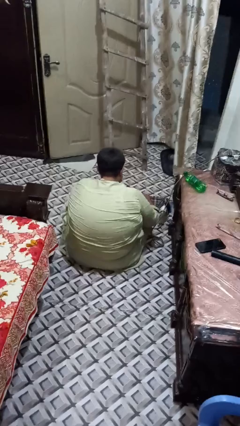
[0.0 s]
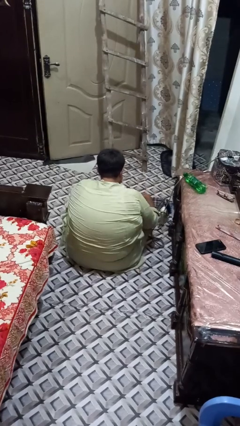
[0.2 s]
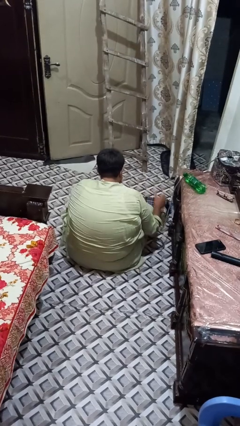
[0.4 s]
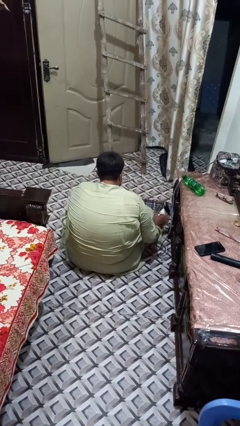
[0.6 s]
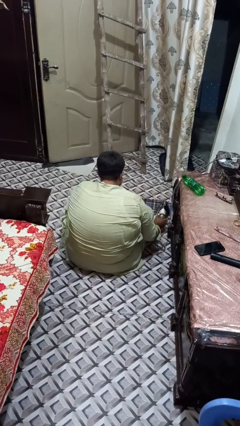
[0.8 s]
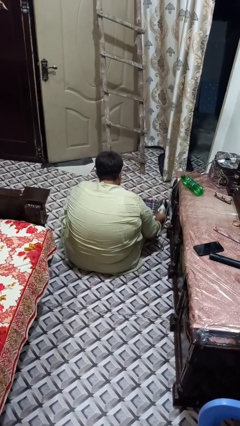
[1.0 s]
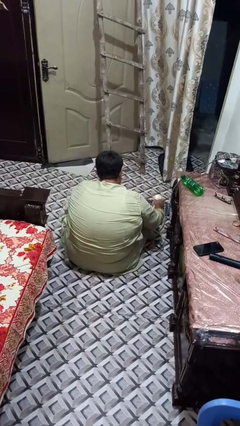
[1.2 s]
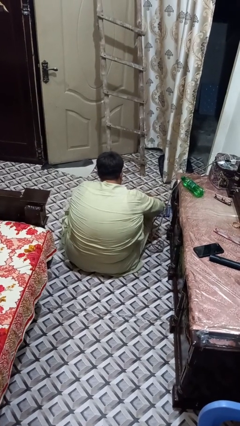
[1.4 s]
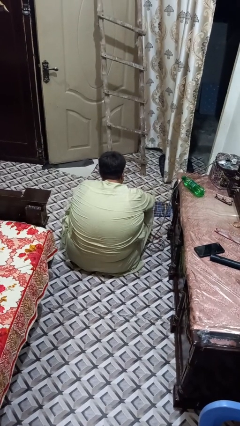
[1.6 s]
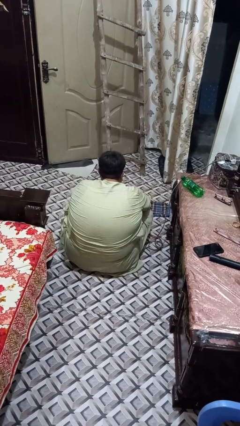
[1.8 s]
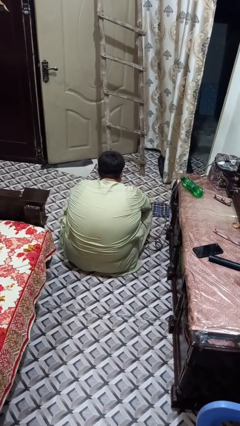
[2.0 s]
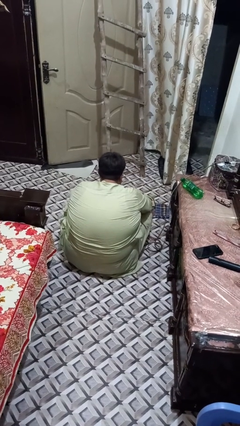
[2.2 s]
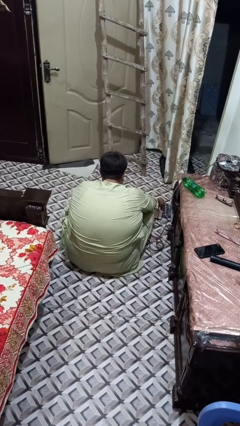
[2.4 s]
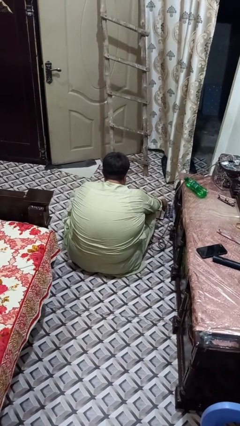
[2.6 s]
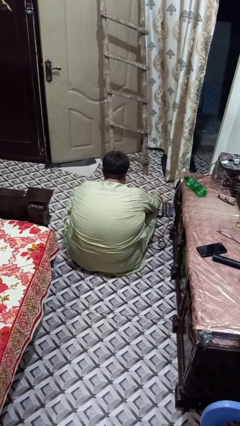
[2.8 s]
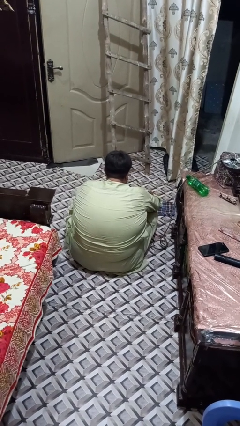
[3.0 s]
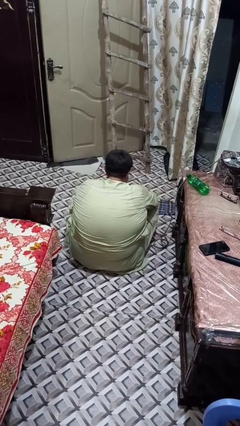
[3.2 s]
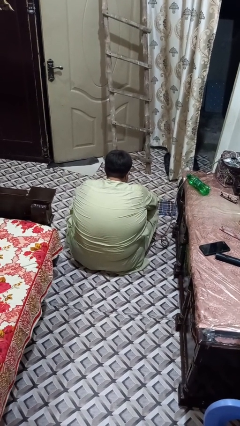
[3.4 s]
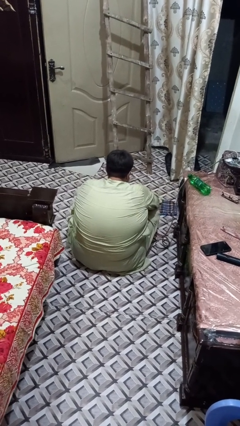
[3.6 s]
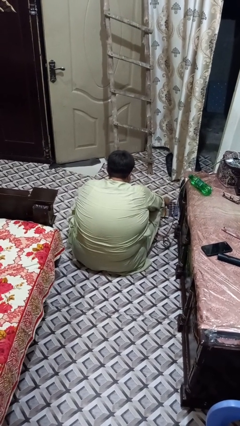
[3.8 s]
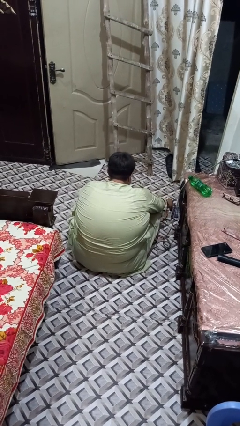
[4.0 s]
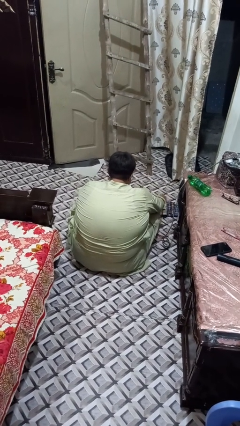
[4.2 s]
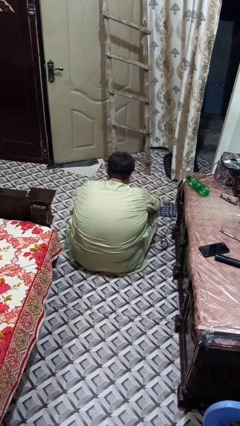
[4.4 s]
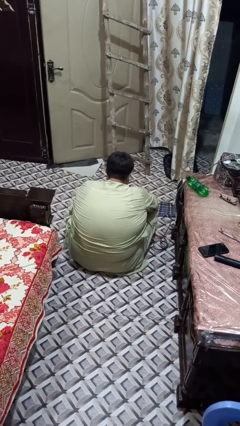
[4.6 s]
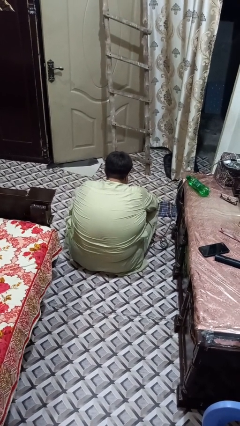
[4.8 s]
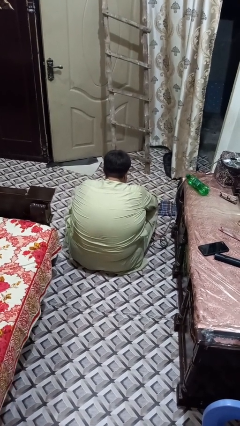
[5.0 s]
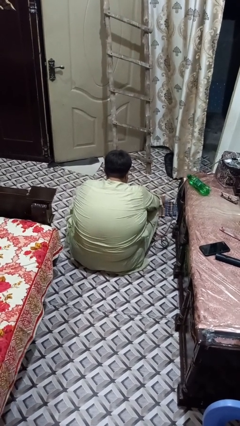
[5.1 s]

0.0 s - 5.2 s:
person irons clothes

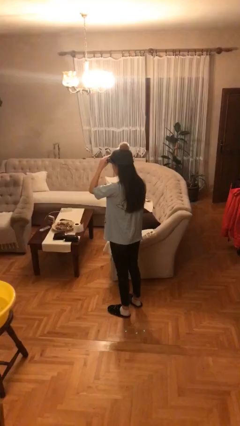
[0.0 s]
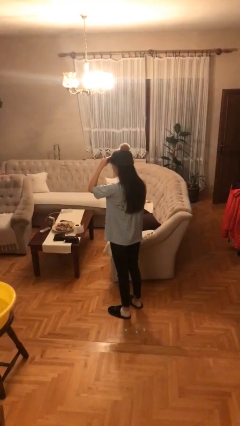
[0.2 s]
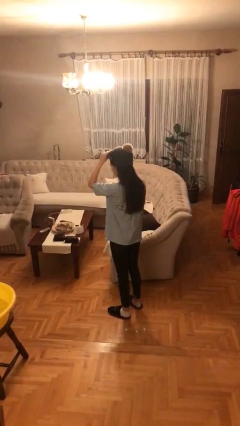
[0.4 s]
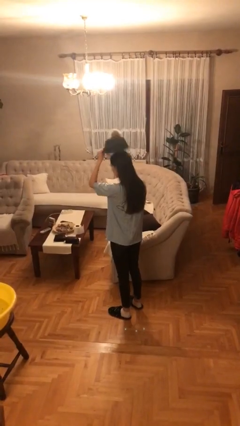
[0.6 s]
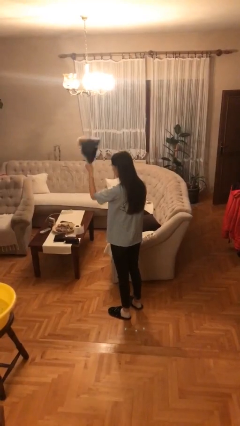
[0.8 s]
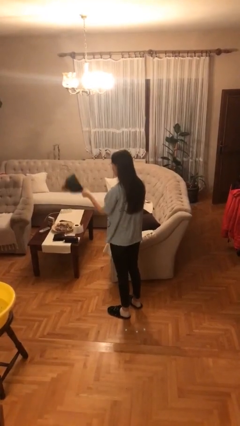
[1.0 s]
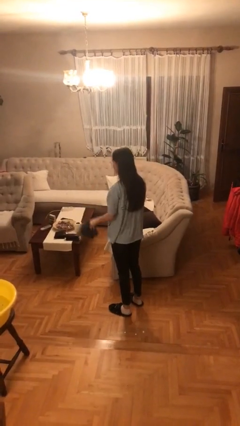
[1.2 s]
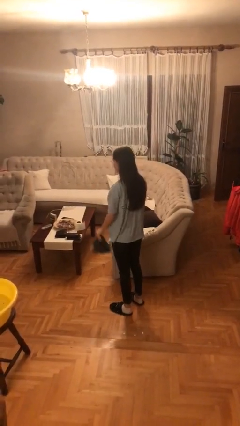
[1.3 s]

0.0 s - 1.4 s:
person takes off hat

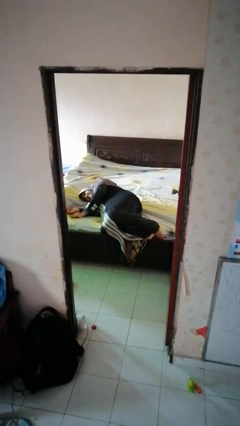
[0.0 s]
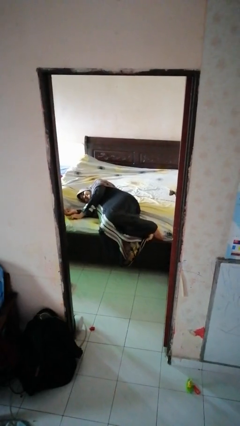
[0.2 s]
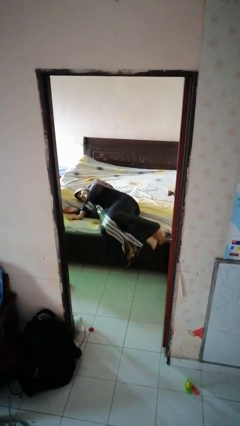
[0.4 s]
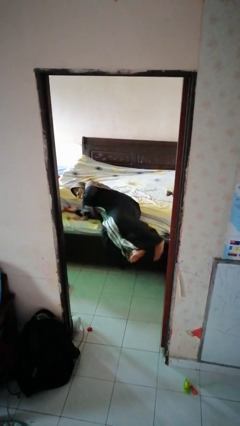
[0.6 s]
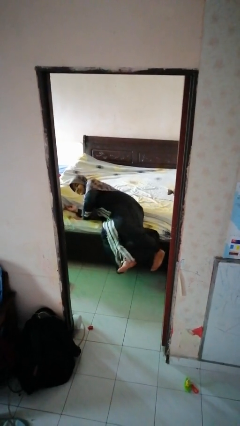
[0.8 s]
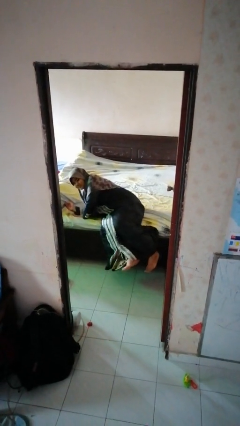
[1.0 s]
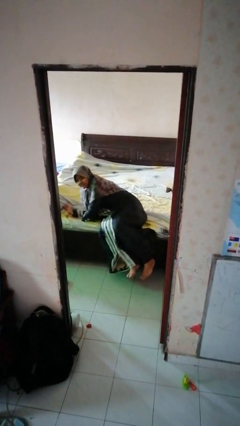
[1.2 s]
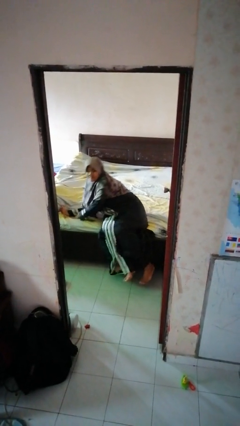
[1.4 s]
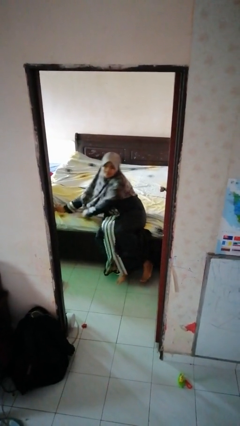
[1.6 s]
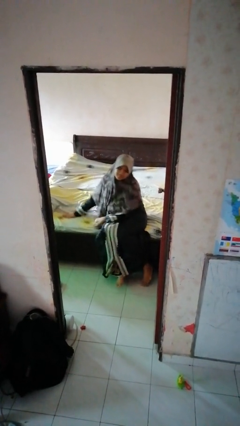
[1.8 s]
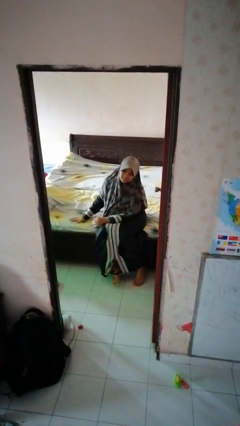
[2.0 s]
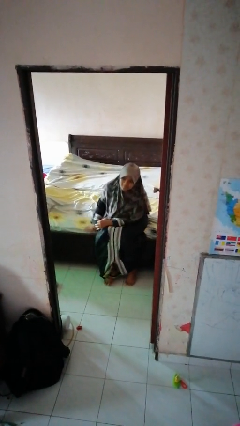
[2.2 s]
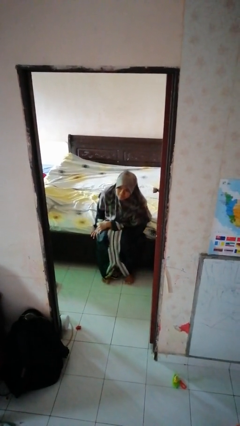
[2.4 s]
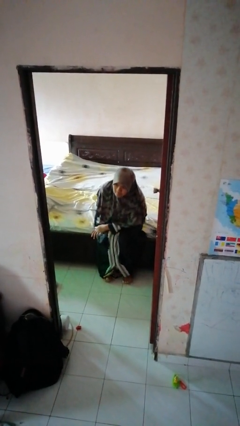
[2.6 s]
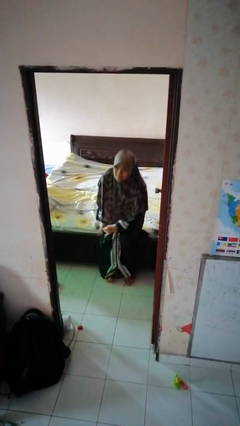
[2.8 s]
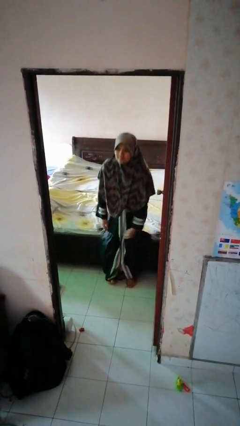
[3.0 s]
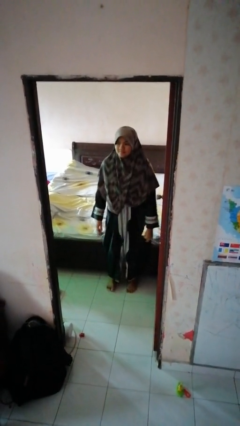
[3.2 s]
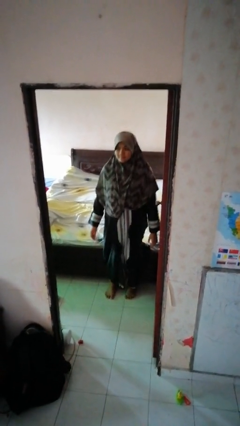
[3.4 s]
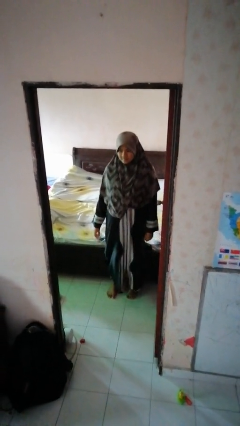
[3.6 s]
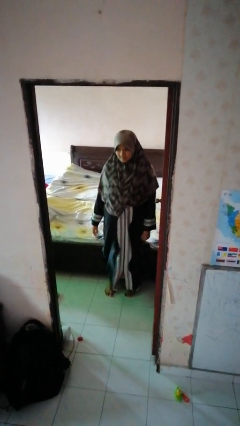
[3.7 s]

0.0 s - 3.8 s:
person stands up

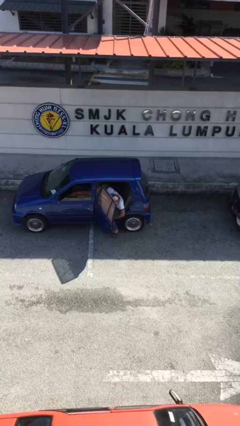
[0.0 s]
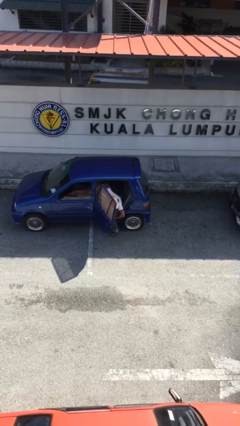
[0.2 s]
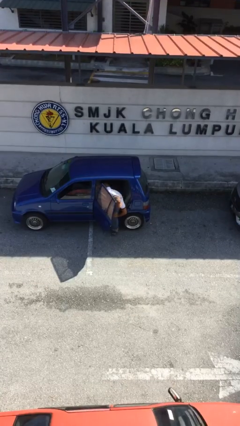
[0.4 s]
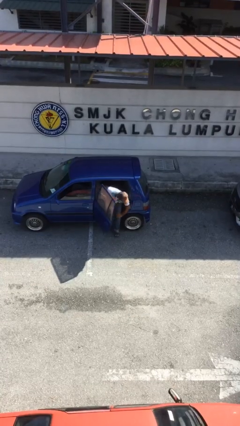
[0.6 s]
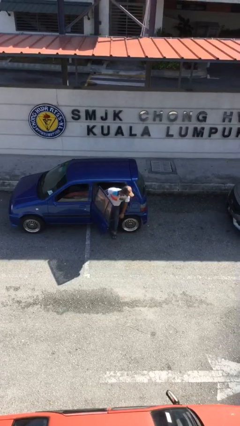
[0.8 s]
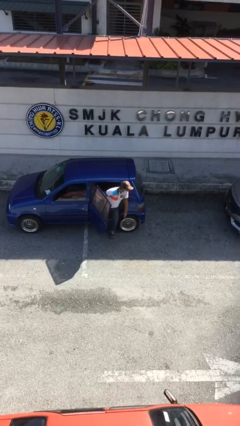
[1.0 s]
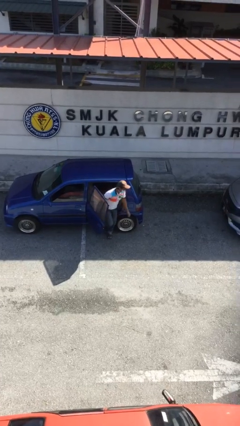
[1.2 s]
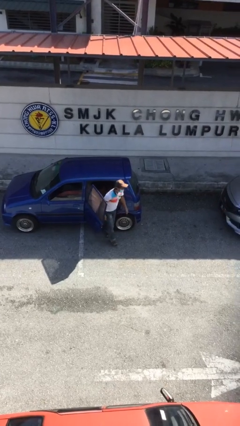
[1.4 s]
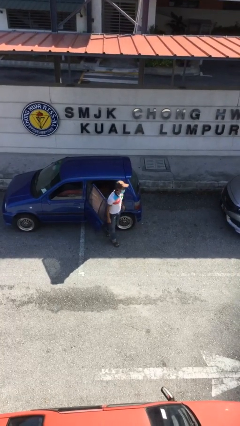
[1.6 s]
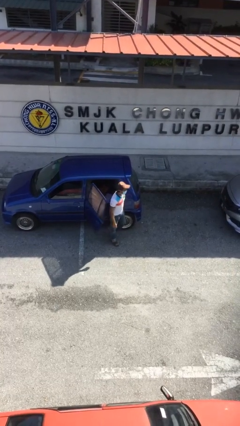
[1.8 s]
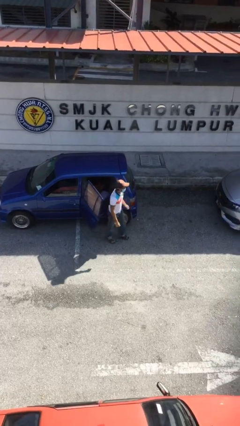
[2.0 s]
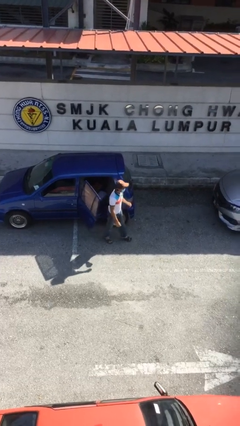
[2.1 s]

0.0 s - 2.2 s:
person exits car

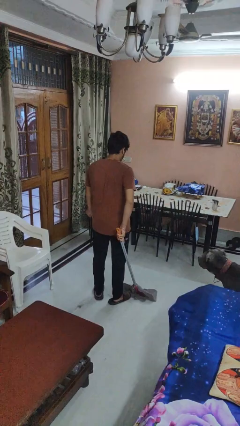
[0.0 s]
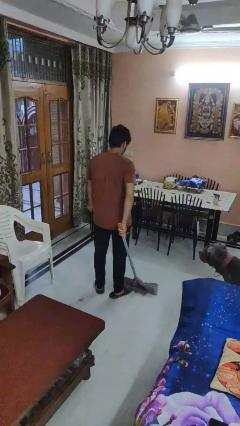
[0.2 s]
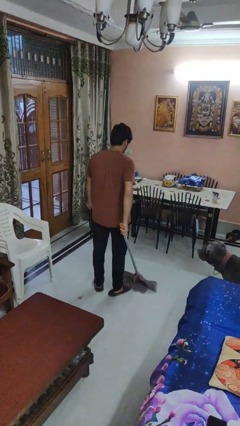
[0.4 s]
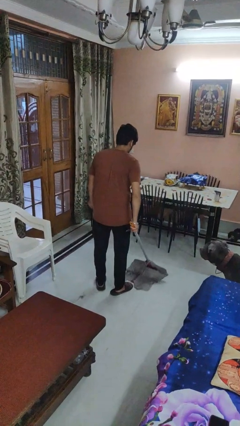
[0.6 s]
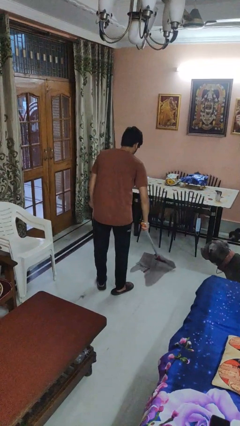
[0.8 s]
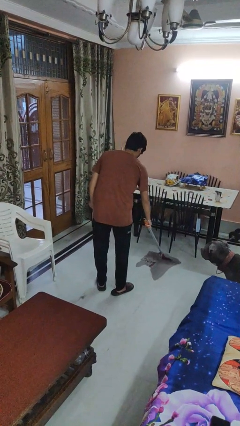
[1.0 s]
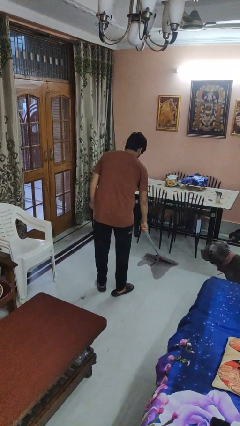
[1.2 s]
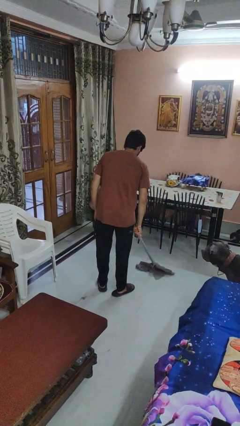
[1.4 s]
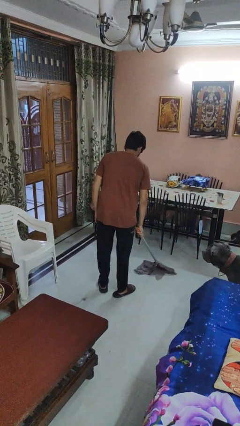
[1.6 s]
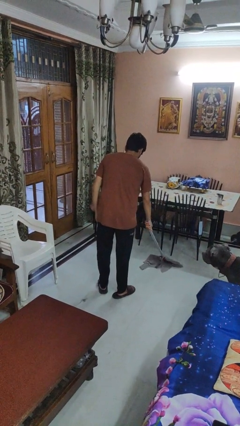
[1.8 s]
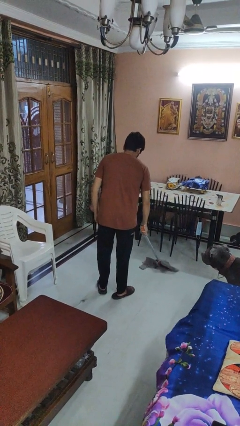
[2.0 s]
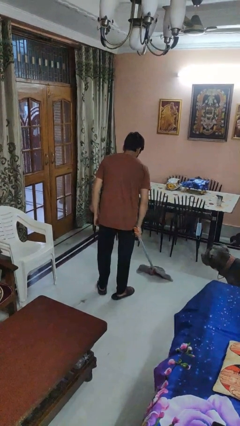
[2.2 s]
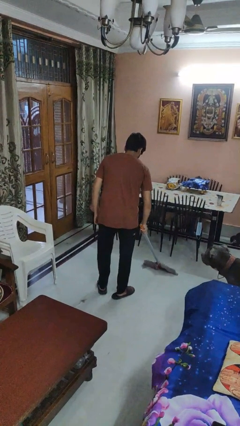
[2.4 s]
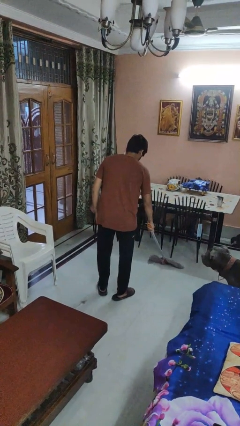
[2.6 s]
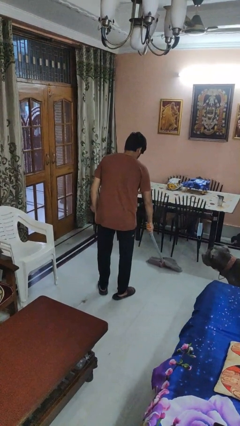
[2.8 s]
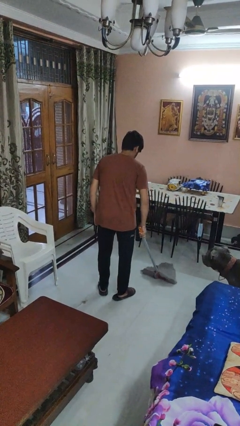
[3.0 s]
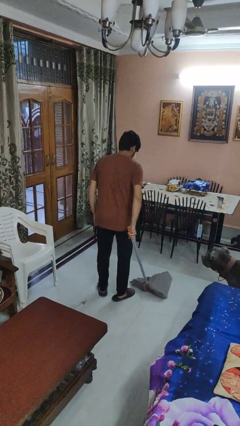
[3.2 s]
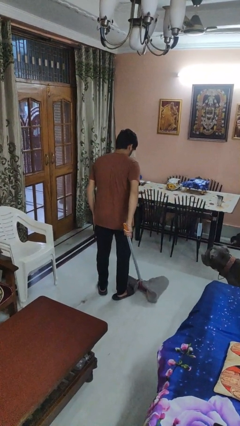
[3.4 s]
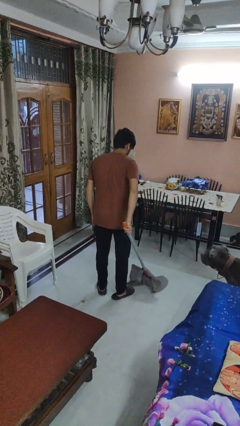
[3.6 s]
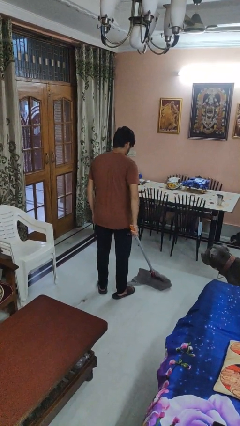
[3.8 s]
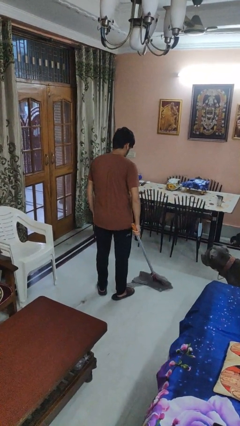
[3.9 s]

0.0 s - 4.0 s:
person mops

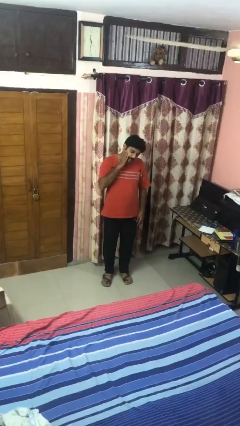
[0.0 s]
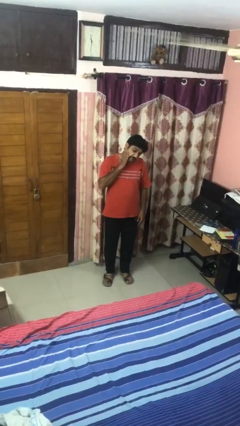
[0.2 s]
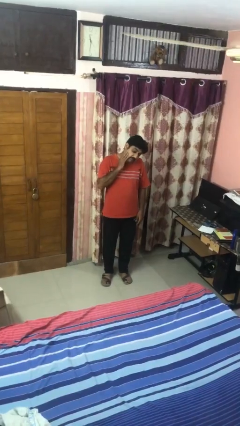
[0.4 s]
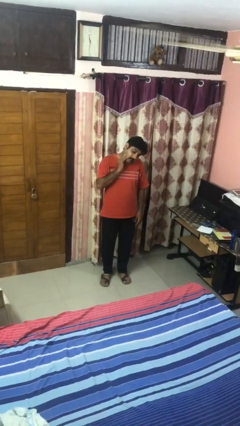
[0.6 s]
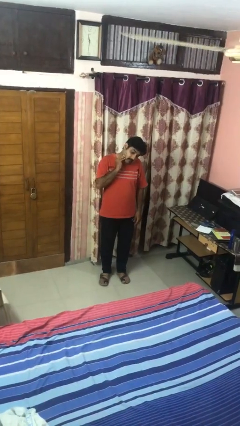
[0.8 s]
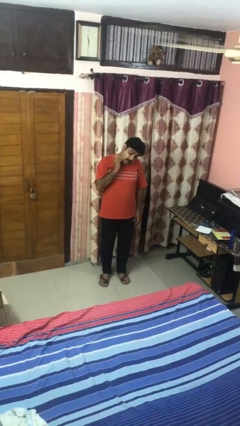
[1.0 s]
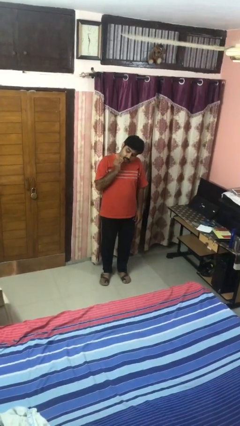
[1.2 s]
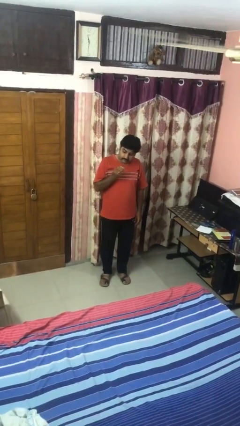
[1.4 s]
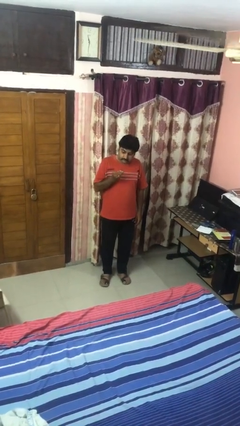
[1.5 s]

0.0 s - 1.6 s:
person swats bug
